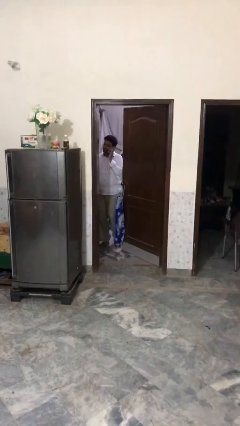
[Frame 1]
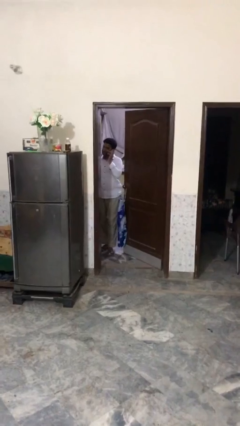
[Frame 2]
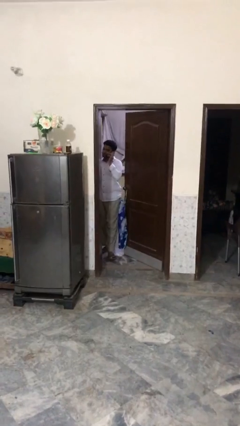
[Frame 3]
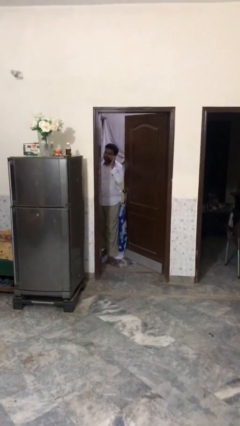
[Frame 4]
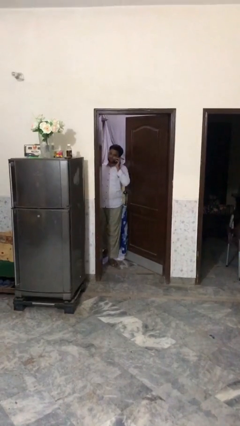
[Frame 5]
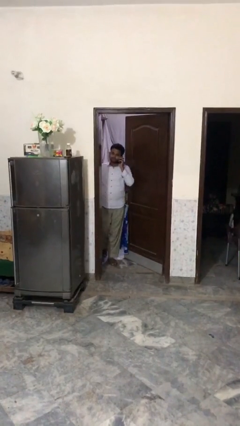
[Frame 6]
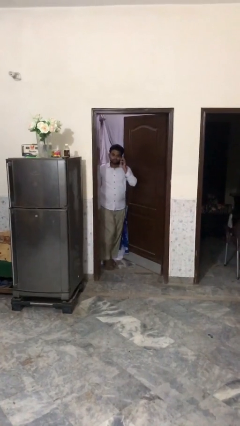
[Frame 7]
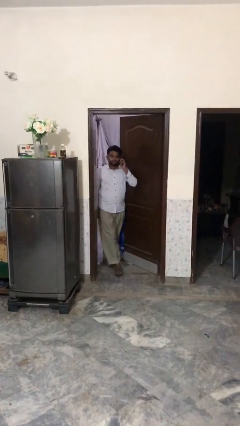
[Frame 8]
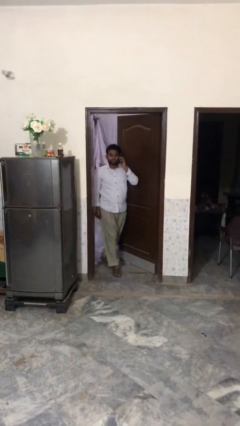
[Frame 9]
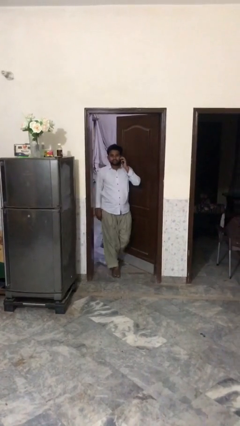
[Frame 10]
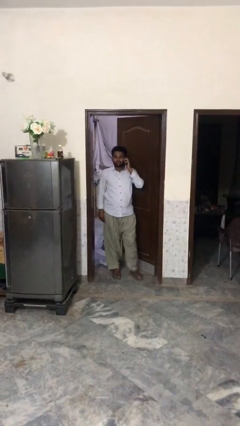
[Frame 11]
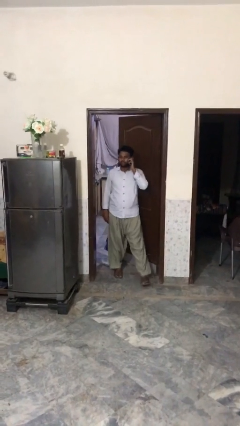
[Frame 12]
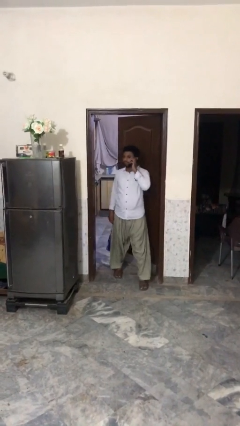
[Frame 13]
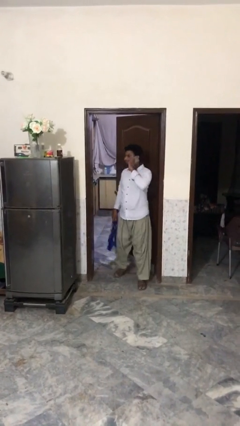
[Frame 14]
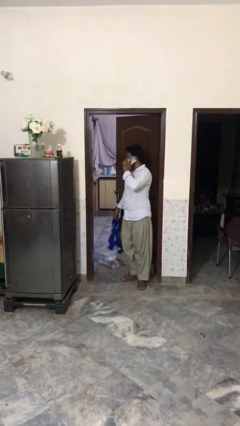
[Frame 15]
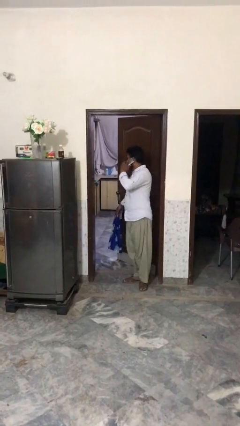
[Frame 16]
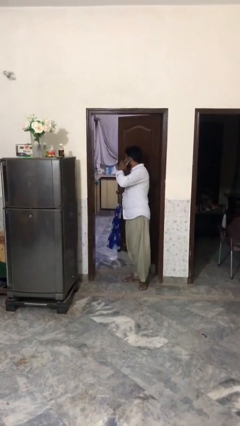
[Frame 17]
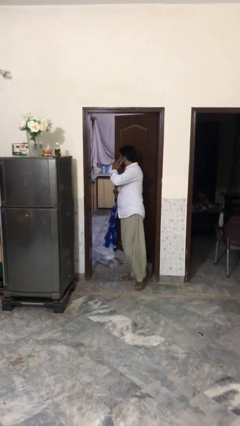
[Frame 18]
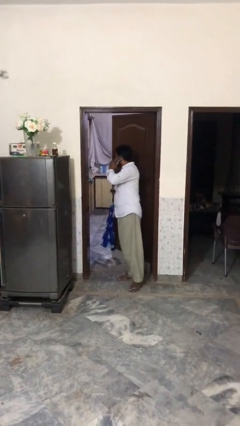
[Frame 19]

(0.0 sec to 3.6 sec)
person enters scene through structure

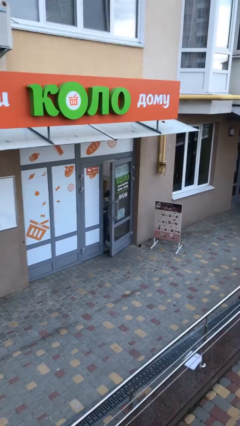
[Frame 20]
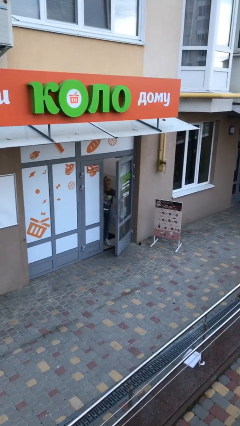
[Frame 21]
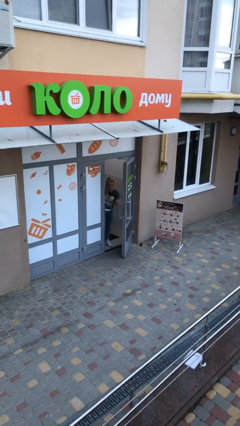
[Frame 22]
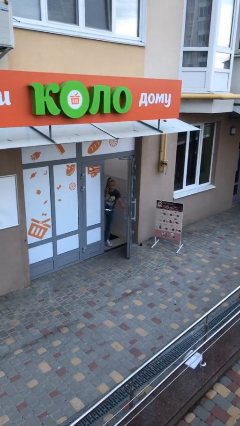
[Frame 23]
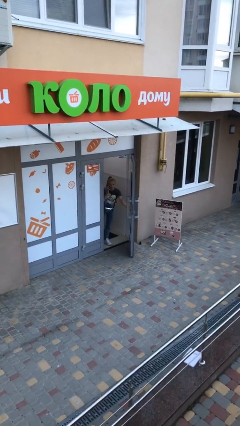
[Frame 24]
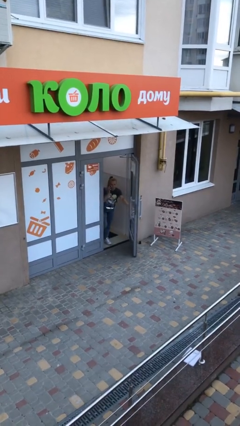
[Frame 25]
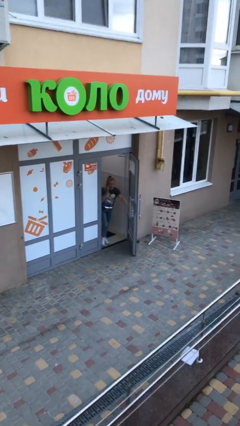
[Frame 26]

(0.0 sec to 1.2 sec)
person opens facility door

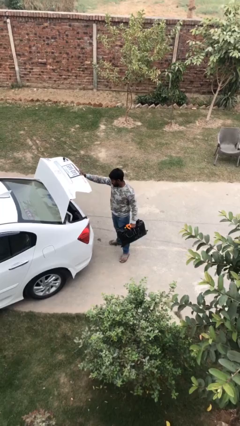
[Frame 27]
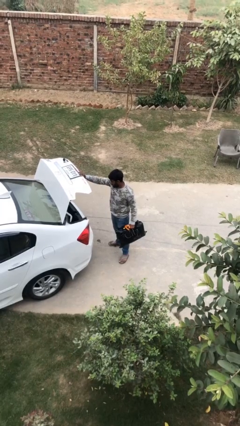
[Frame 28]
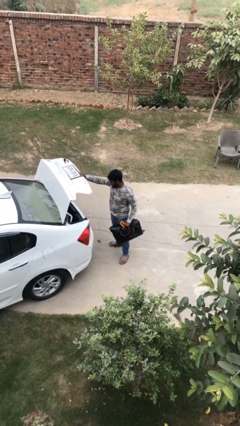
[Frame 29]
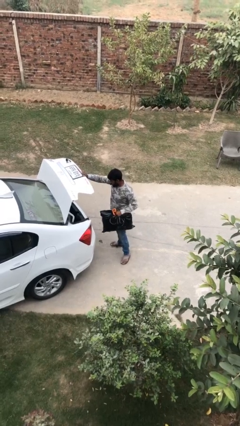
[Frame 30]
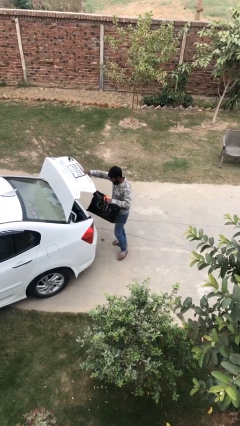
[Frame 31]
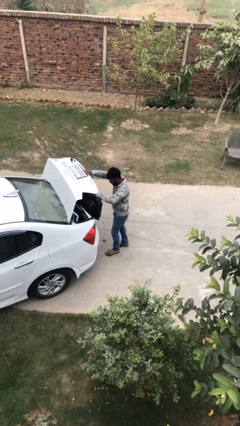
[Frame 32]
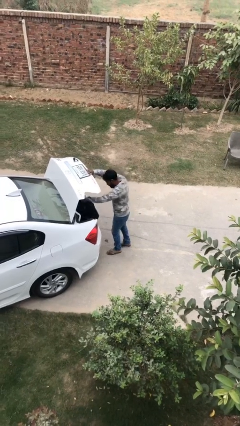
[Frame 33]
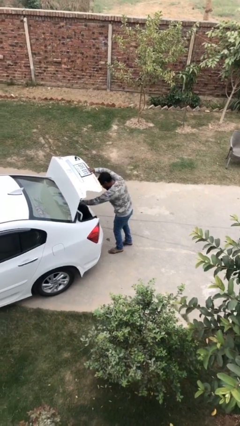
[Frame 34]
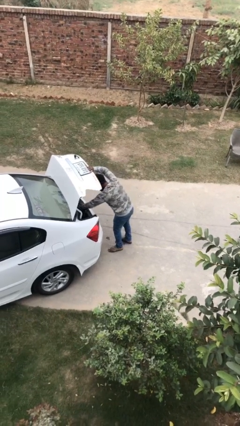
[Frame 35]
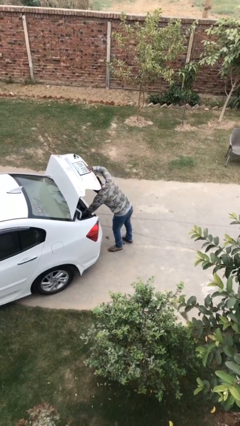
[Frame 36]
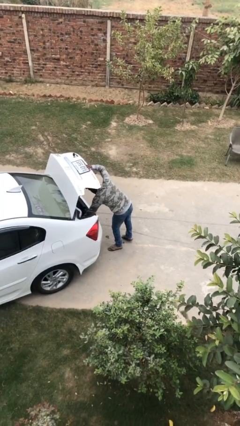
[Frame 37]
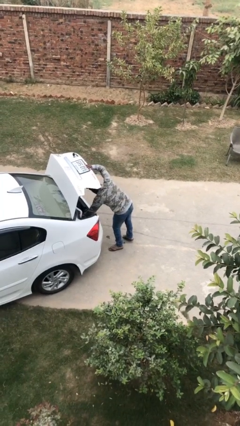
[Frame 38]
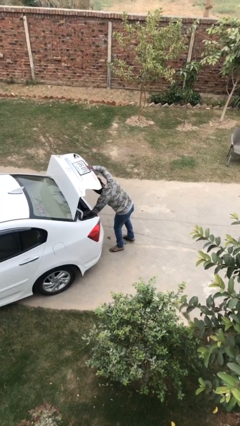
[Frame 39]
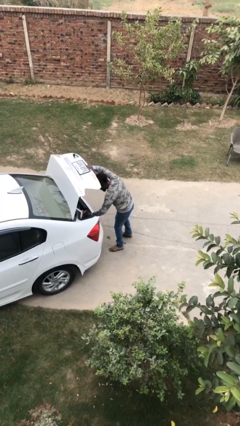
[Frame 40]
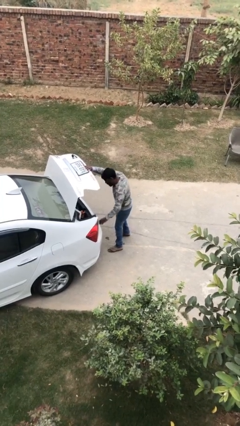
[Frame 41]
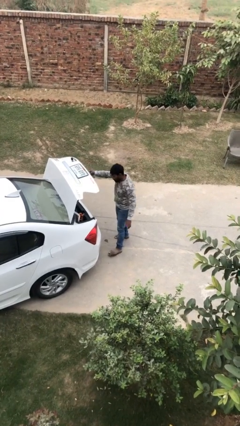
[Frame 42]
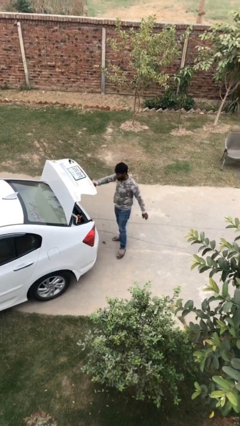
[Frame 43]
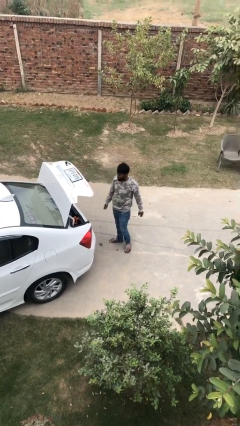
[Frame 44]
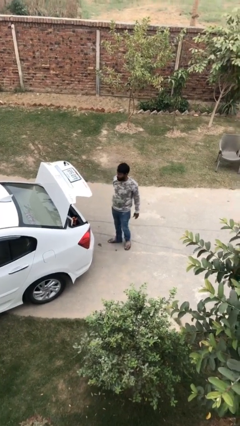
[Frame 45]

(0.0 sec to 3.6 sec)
person loads car

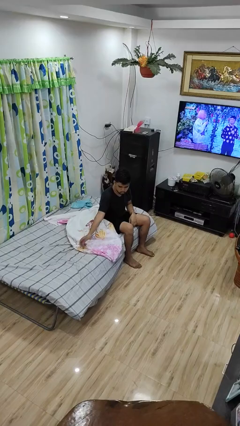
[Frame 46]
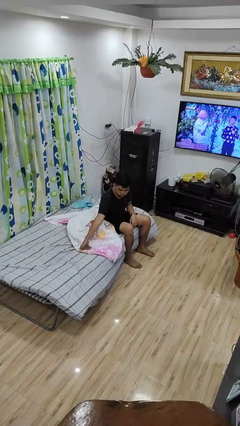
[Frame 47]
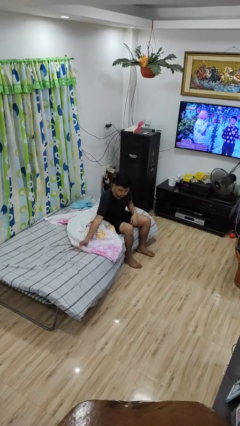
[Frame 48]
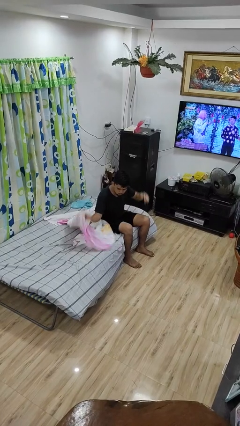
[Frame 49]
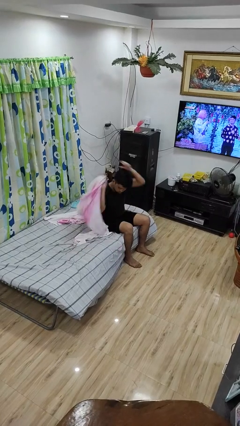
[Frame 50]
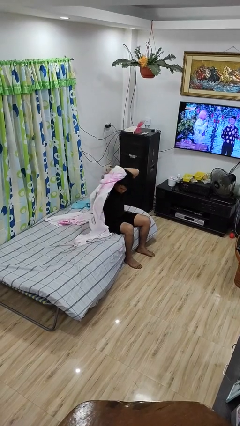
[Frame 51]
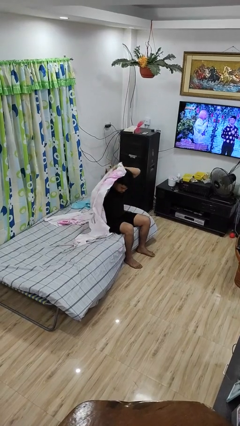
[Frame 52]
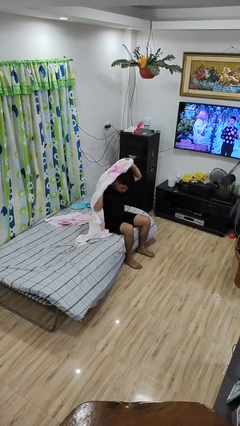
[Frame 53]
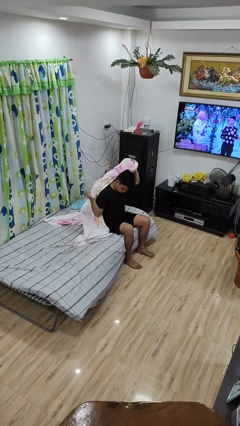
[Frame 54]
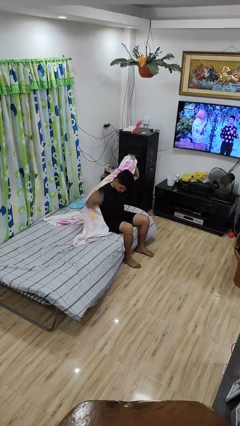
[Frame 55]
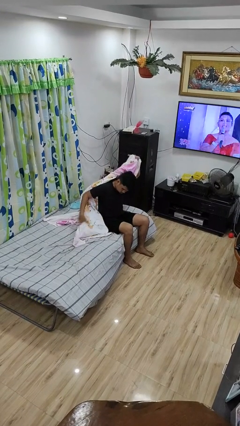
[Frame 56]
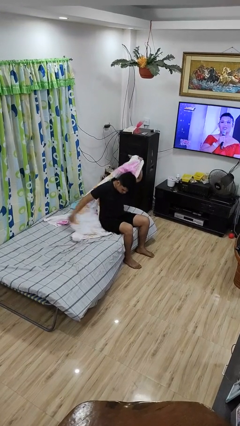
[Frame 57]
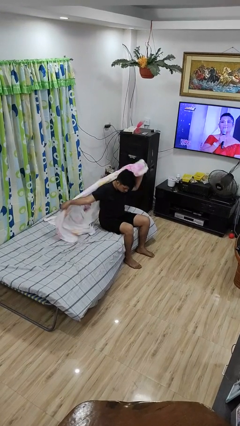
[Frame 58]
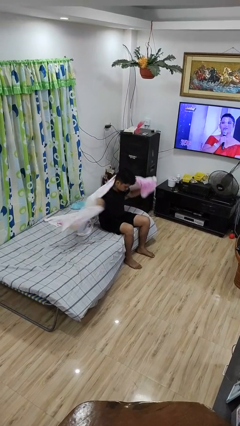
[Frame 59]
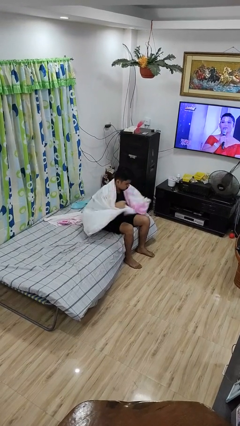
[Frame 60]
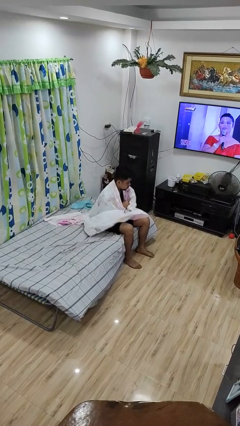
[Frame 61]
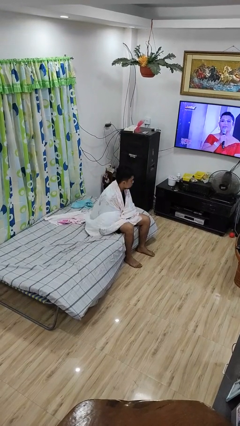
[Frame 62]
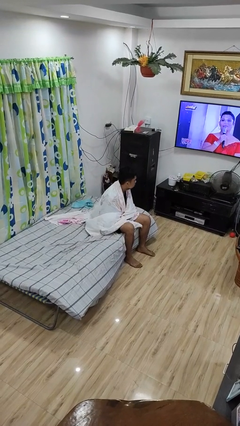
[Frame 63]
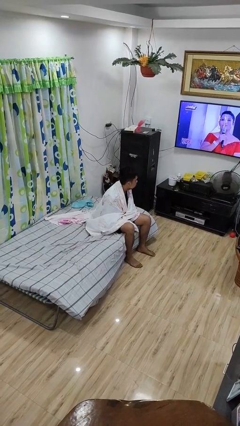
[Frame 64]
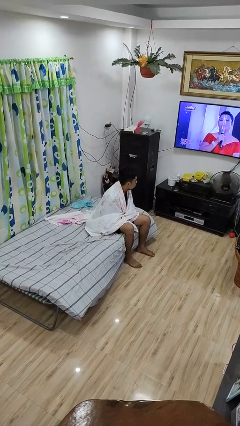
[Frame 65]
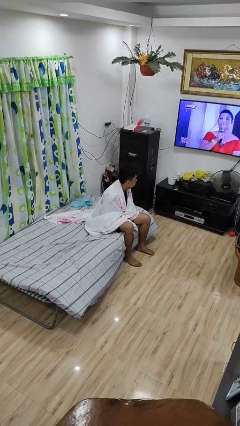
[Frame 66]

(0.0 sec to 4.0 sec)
person covers with blanket

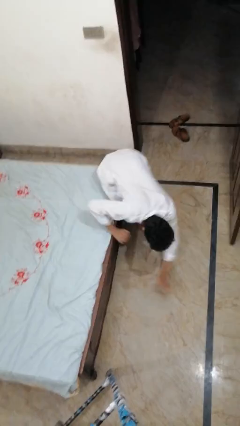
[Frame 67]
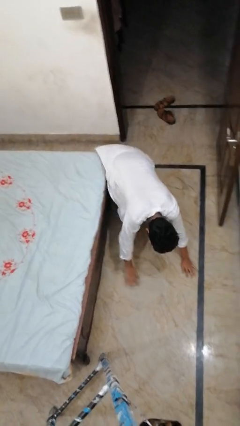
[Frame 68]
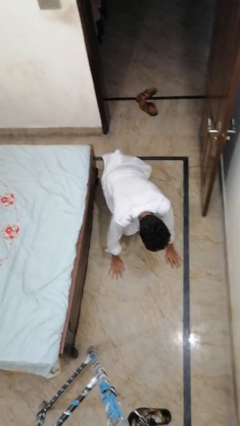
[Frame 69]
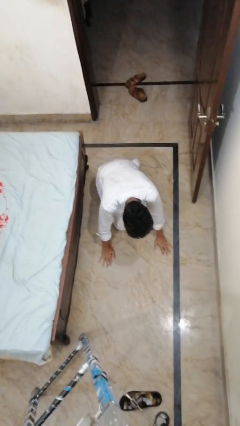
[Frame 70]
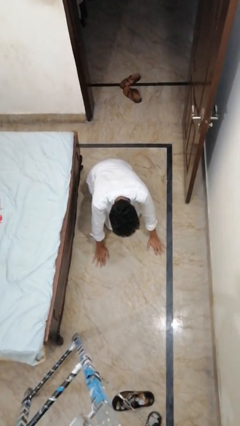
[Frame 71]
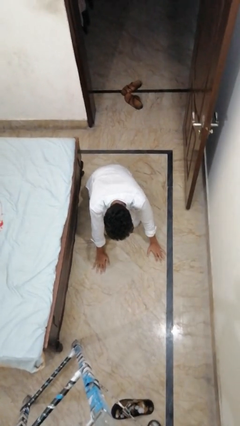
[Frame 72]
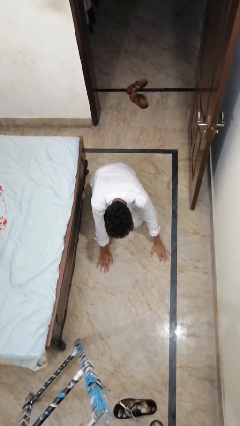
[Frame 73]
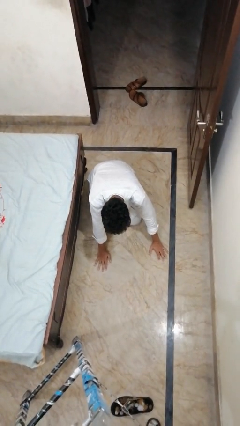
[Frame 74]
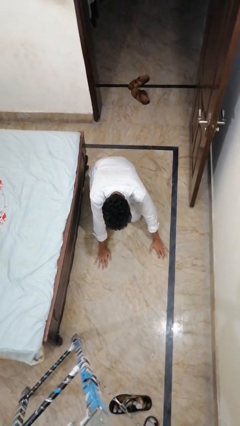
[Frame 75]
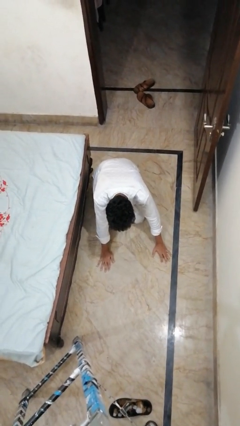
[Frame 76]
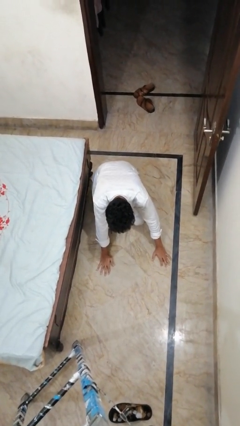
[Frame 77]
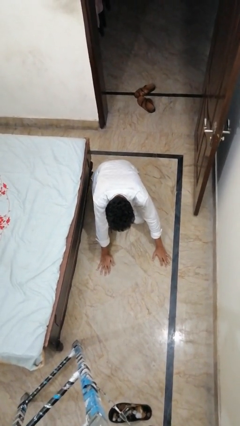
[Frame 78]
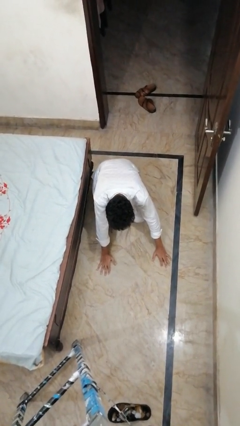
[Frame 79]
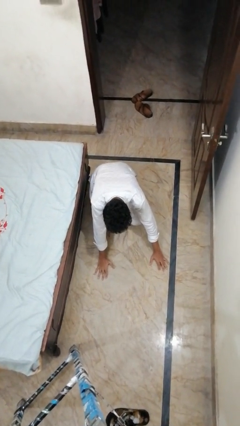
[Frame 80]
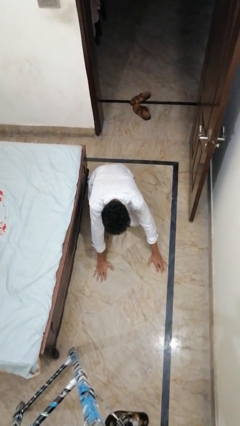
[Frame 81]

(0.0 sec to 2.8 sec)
person falls from bed

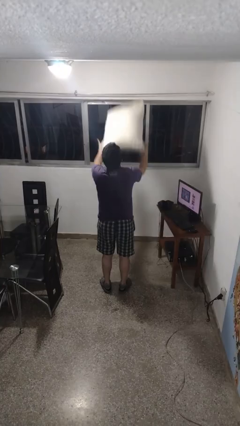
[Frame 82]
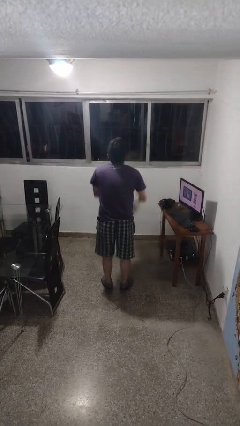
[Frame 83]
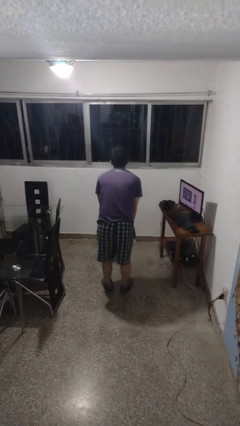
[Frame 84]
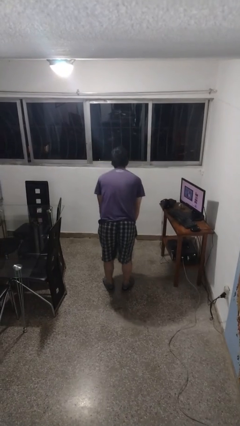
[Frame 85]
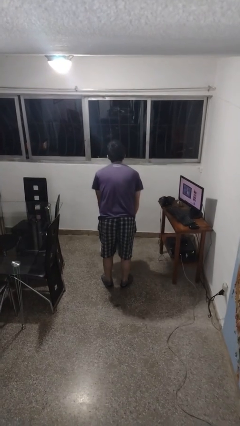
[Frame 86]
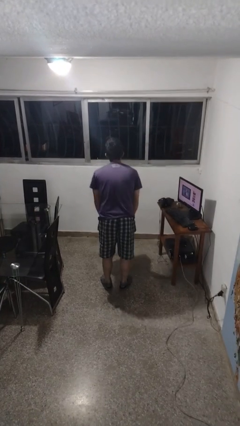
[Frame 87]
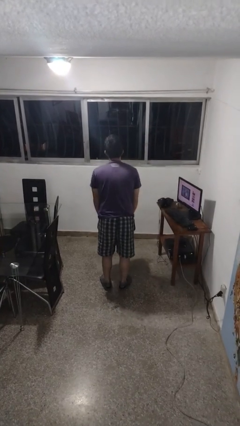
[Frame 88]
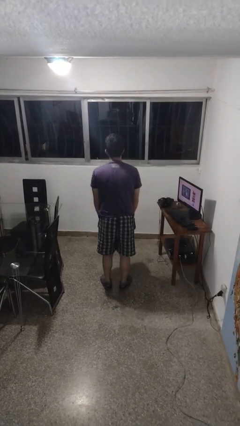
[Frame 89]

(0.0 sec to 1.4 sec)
person catches dropped object

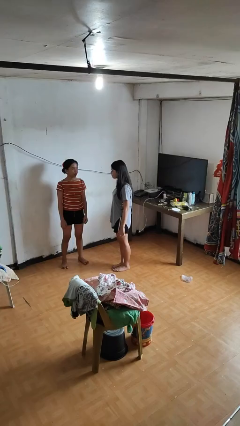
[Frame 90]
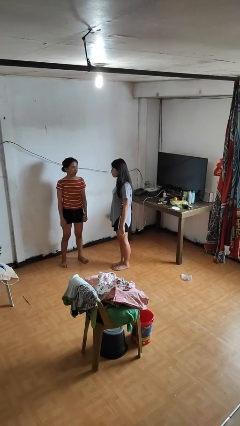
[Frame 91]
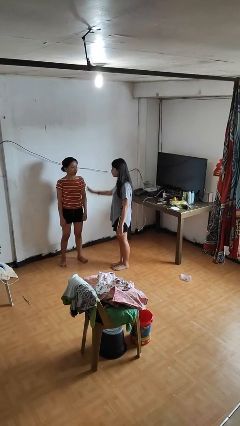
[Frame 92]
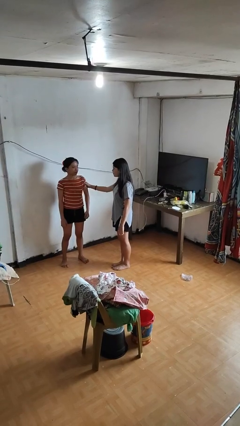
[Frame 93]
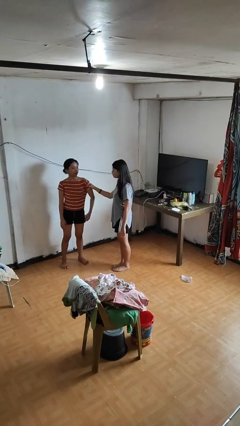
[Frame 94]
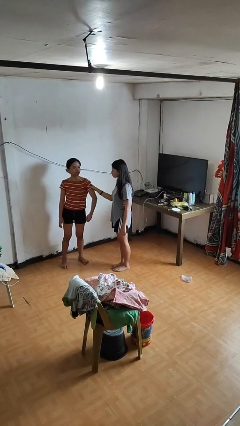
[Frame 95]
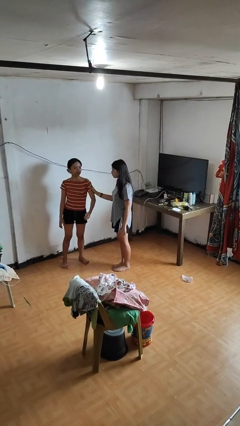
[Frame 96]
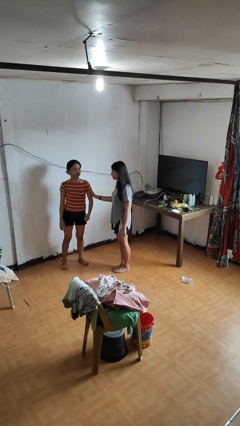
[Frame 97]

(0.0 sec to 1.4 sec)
person grabs person by bicep
